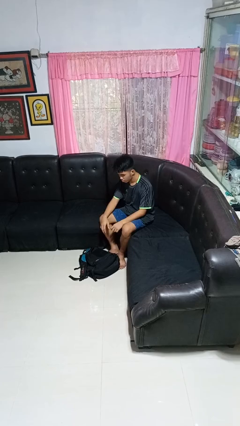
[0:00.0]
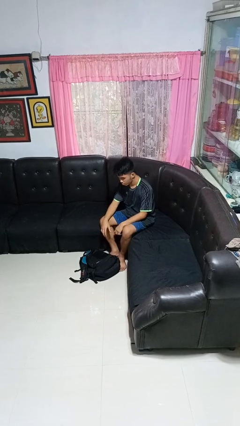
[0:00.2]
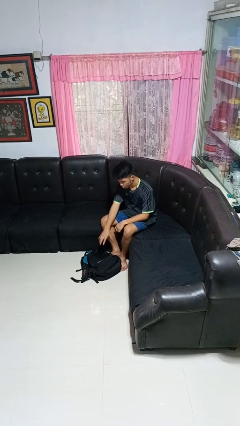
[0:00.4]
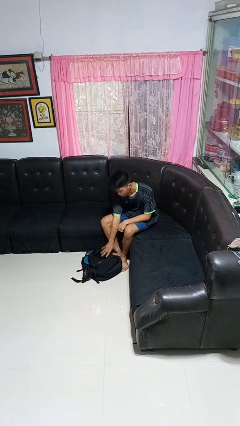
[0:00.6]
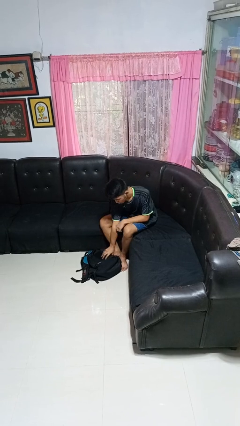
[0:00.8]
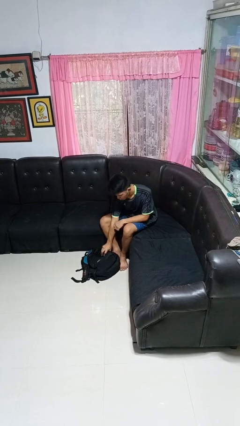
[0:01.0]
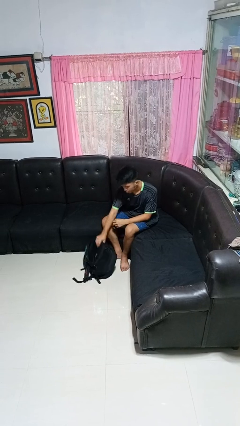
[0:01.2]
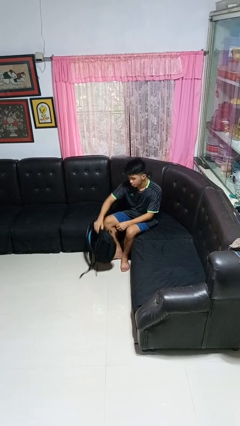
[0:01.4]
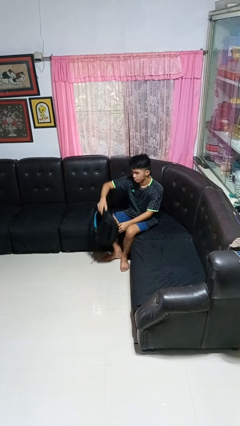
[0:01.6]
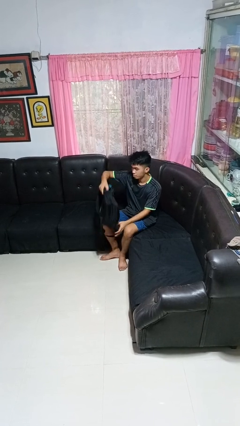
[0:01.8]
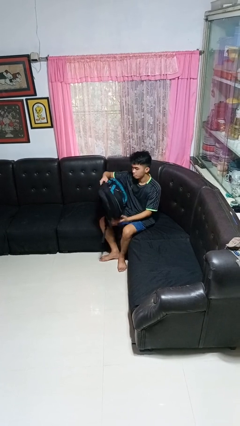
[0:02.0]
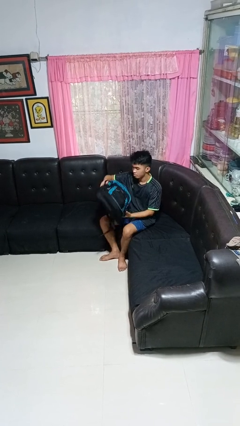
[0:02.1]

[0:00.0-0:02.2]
person picks up object from floor

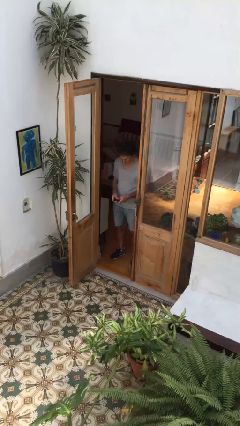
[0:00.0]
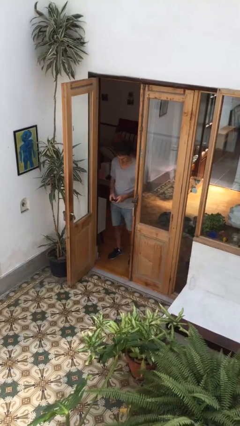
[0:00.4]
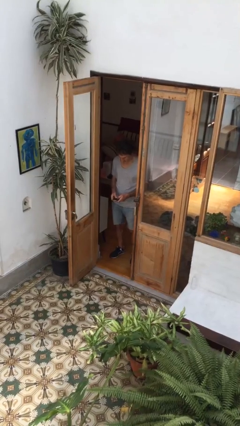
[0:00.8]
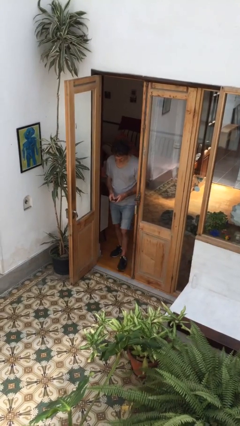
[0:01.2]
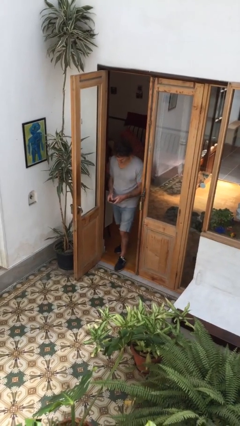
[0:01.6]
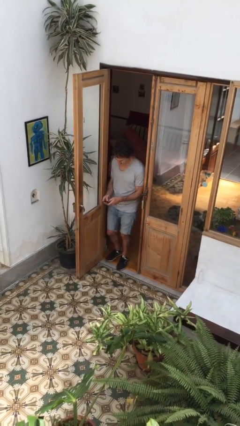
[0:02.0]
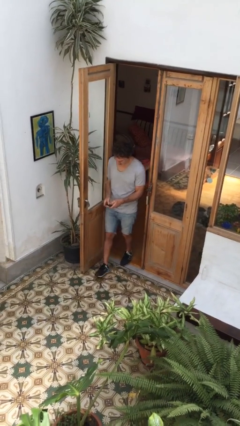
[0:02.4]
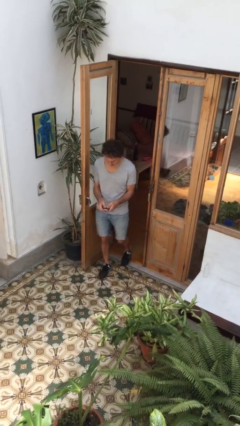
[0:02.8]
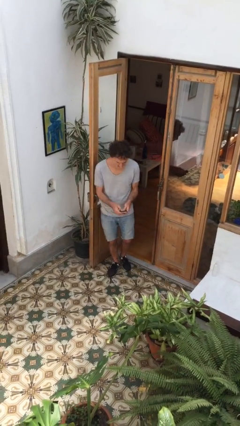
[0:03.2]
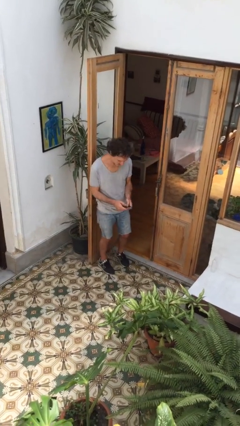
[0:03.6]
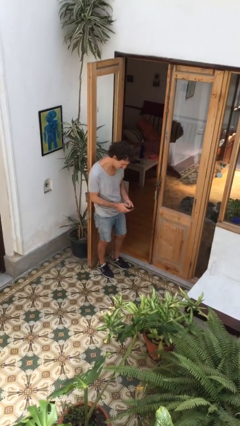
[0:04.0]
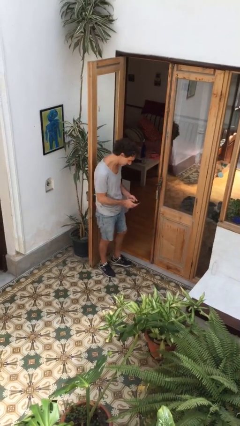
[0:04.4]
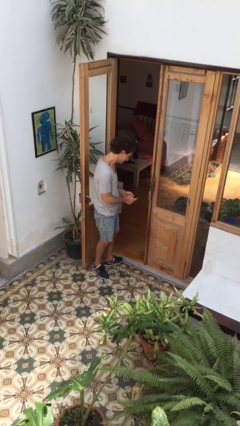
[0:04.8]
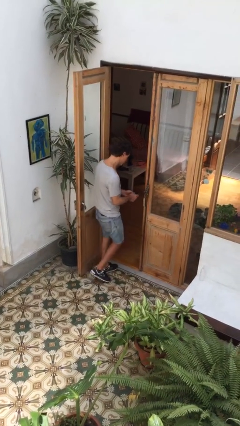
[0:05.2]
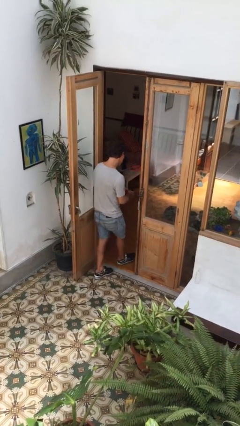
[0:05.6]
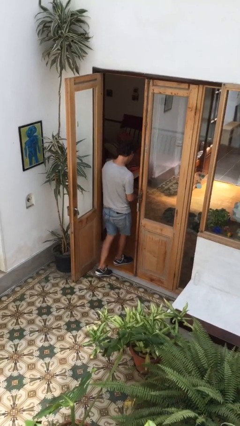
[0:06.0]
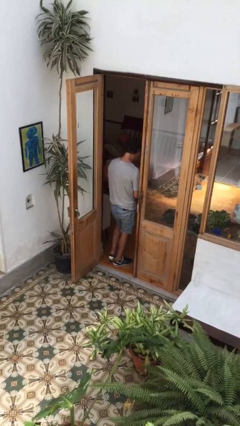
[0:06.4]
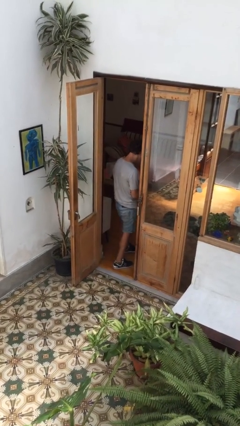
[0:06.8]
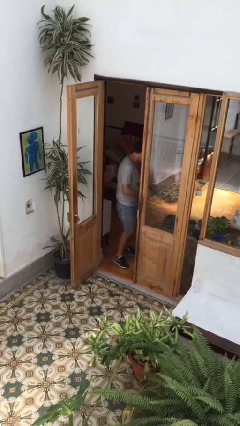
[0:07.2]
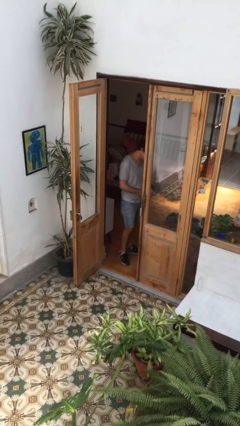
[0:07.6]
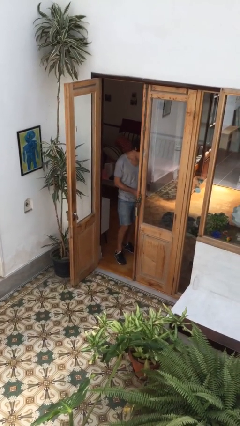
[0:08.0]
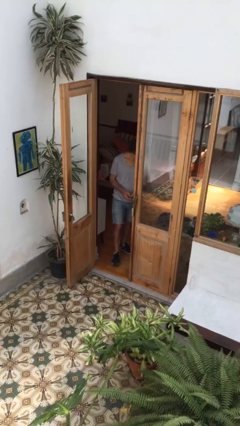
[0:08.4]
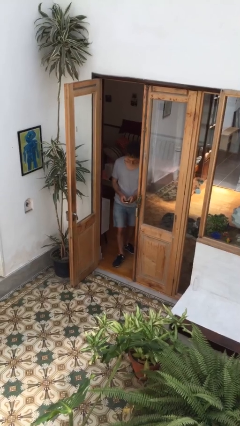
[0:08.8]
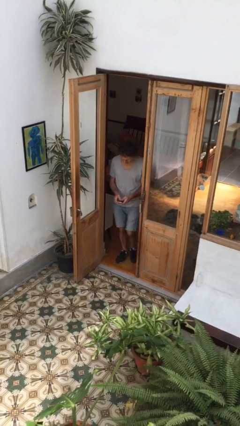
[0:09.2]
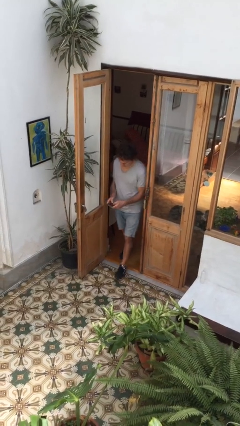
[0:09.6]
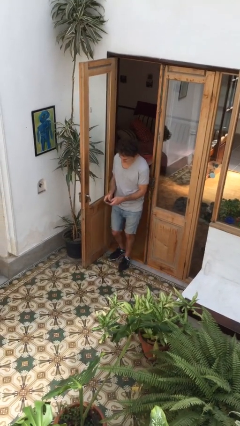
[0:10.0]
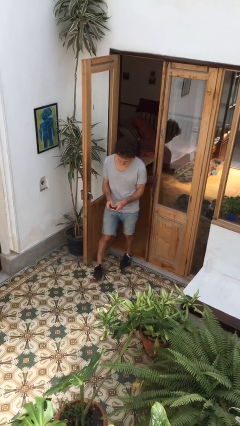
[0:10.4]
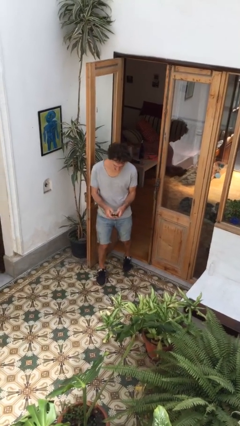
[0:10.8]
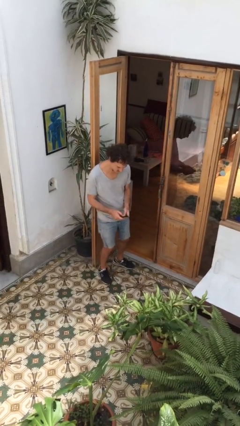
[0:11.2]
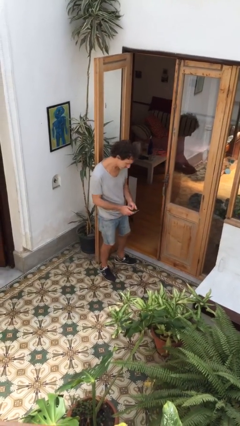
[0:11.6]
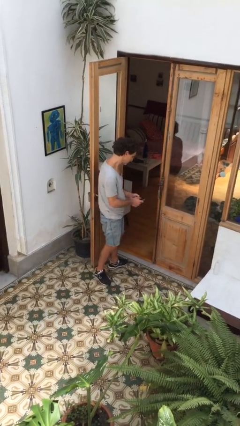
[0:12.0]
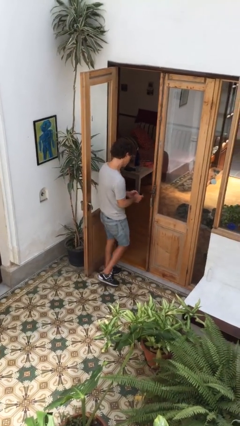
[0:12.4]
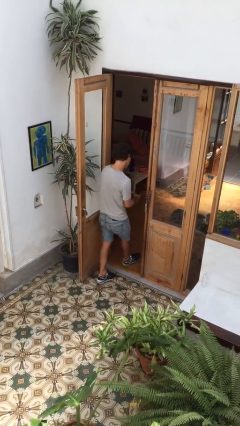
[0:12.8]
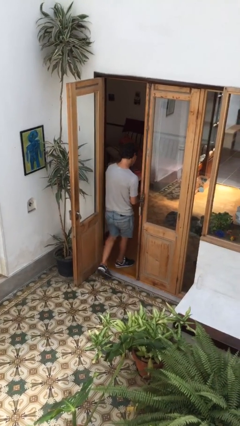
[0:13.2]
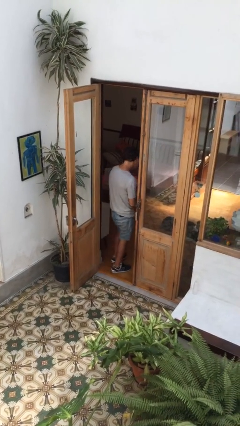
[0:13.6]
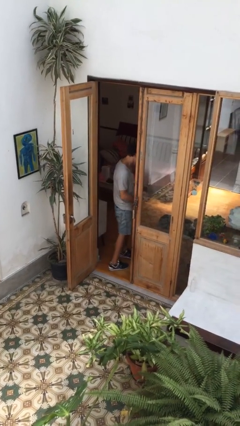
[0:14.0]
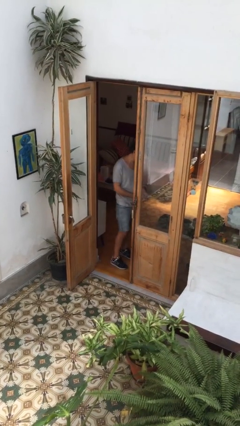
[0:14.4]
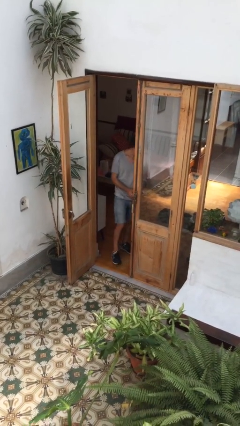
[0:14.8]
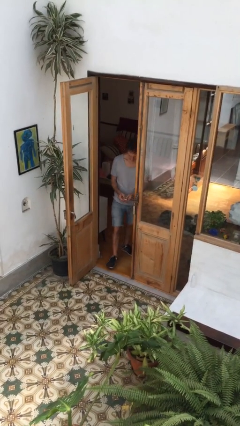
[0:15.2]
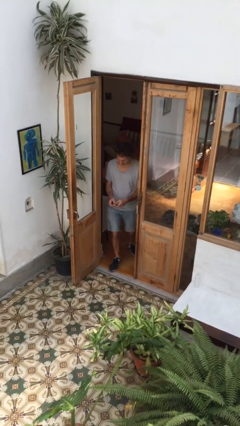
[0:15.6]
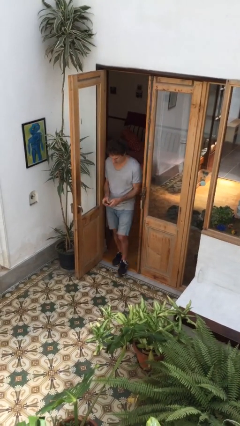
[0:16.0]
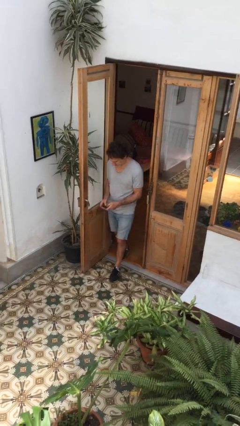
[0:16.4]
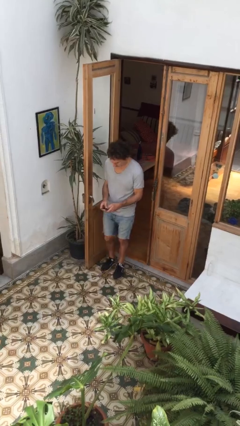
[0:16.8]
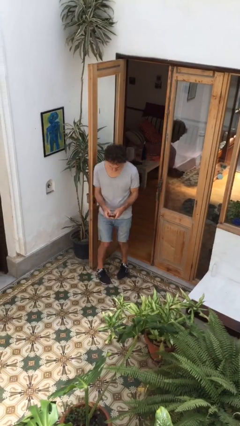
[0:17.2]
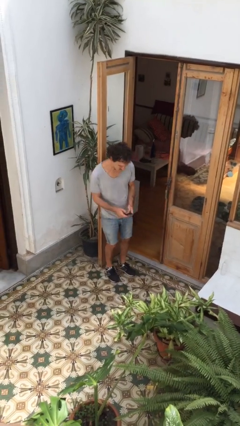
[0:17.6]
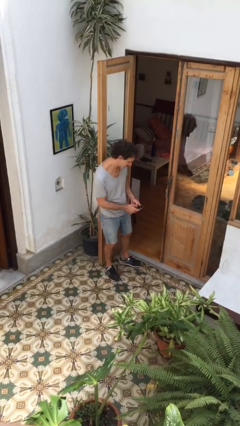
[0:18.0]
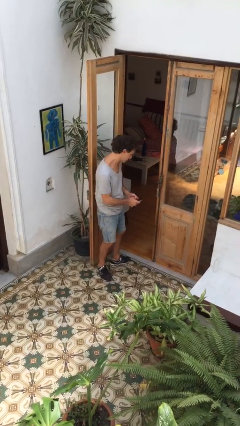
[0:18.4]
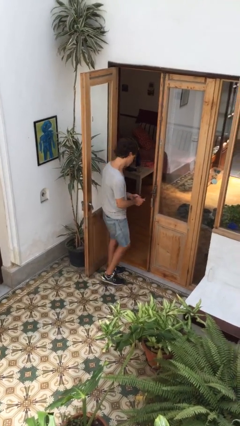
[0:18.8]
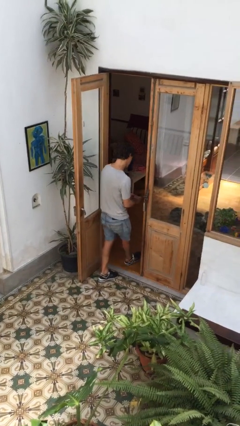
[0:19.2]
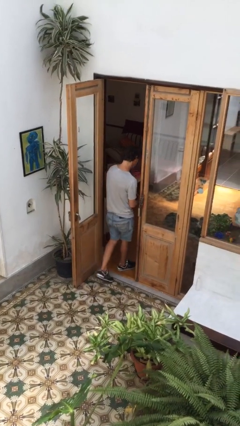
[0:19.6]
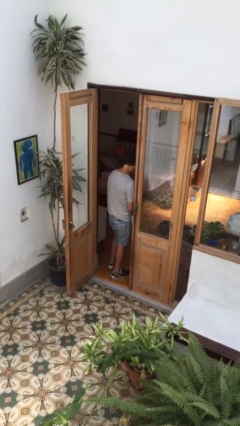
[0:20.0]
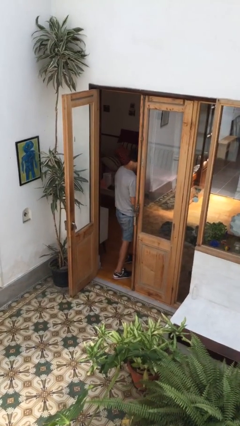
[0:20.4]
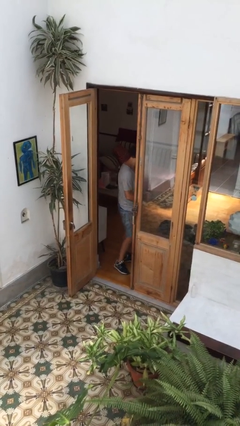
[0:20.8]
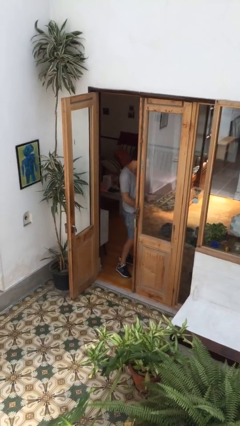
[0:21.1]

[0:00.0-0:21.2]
person texts on phone

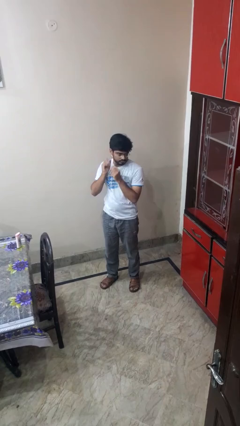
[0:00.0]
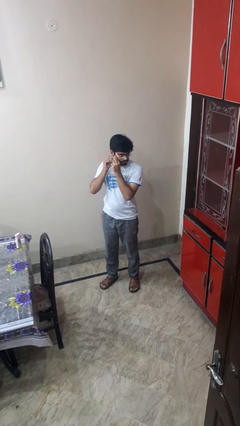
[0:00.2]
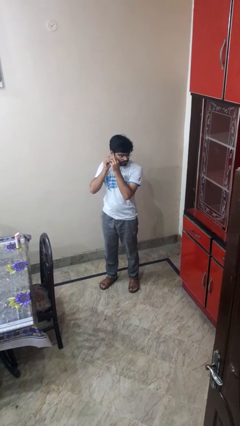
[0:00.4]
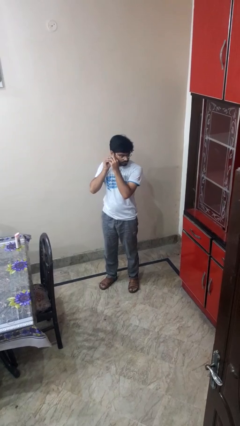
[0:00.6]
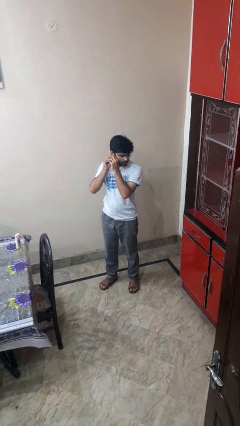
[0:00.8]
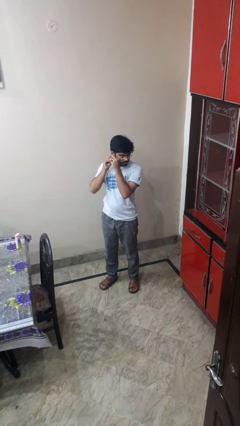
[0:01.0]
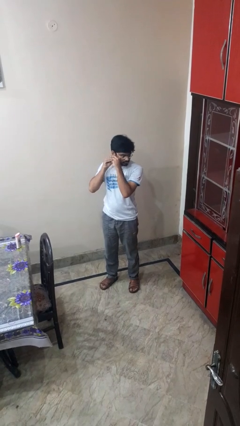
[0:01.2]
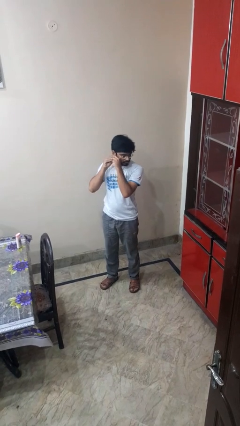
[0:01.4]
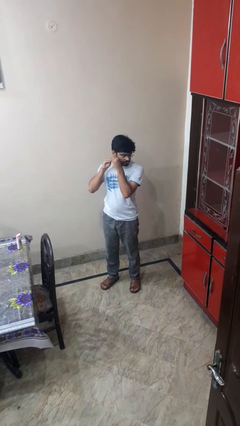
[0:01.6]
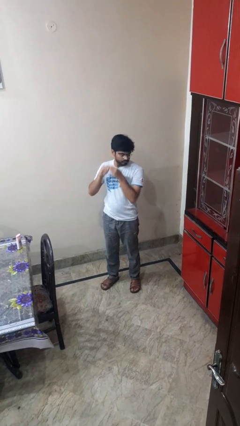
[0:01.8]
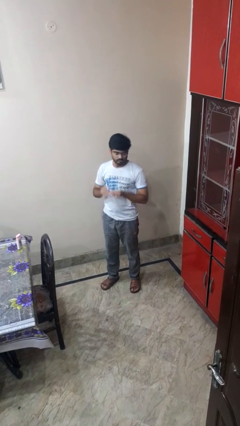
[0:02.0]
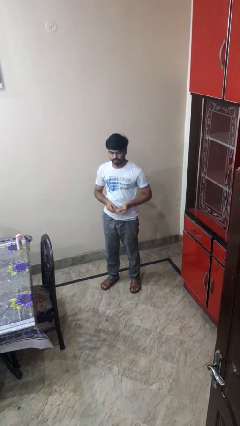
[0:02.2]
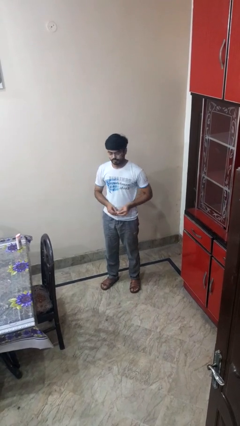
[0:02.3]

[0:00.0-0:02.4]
person takes off earrings

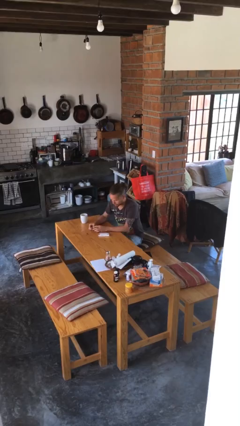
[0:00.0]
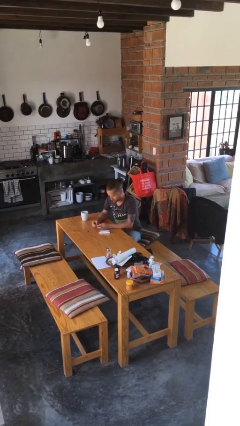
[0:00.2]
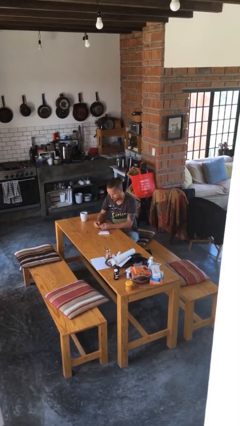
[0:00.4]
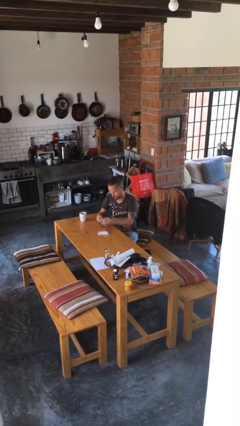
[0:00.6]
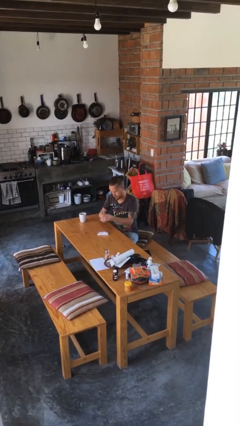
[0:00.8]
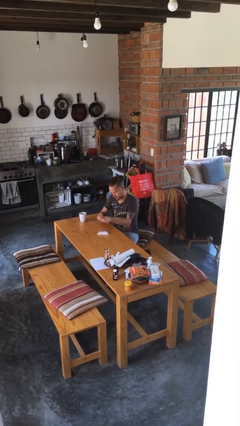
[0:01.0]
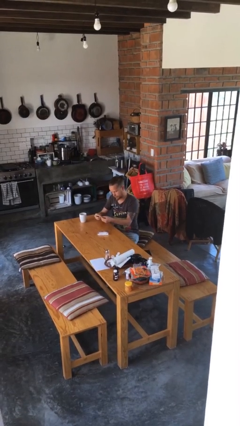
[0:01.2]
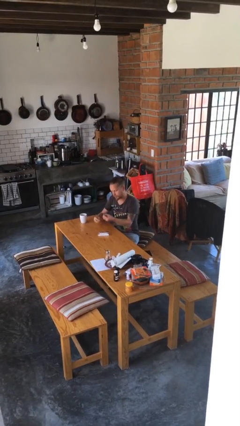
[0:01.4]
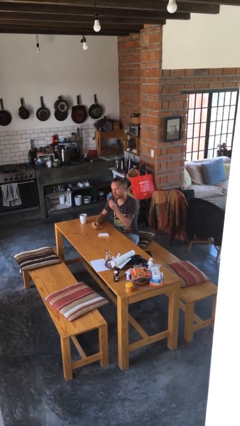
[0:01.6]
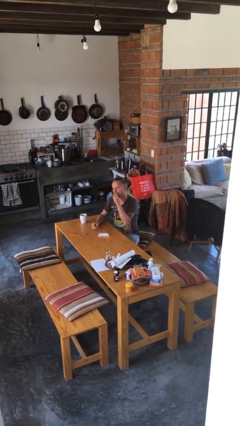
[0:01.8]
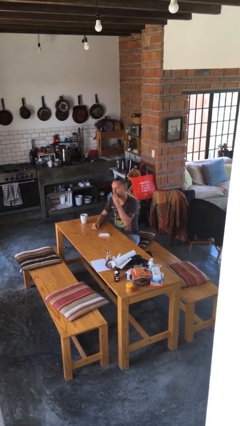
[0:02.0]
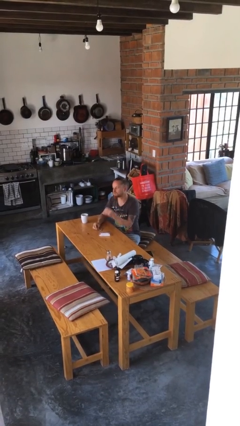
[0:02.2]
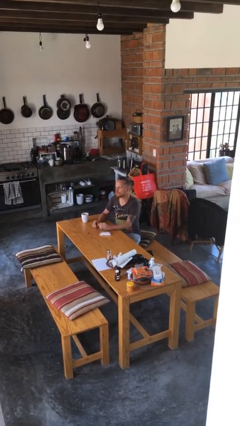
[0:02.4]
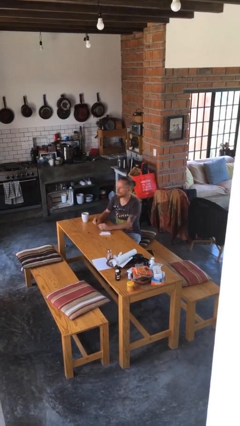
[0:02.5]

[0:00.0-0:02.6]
person takes medicine pills
